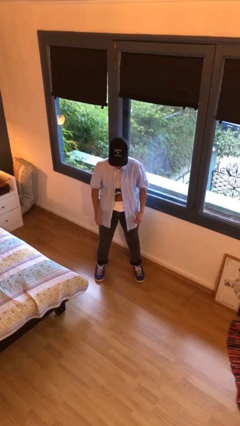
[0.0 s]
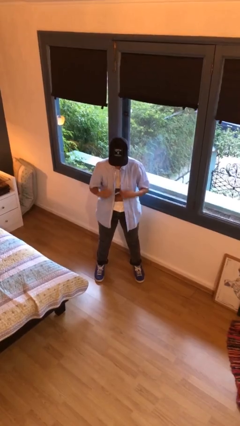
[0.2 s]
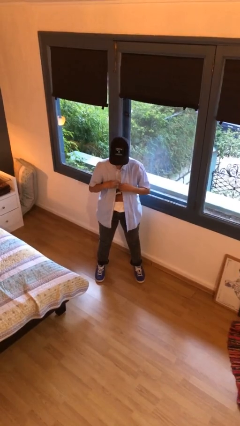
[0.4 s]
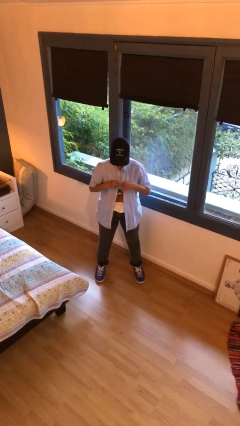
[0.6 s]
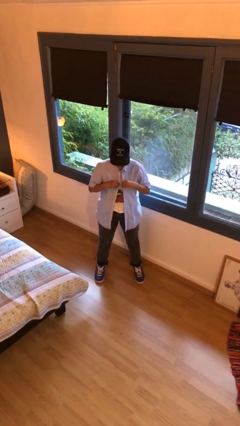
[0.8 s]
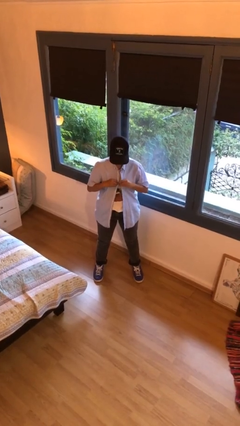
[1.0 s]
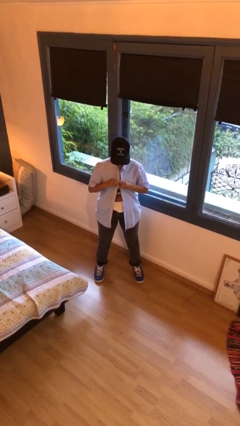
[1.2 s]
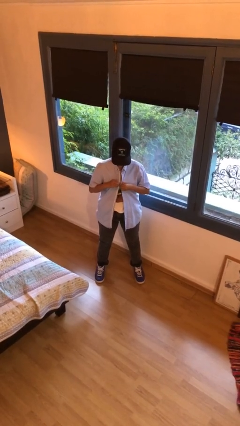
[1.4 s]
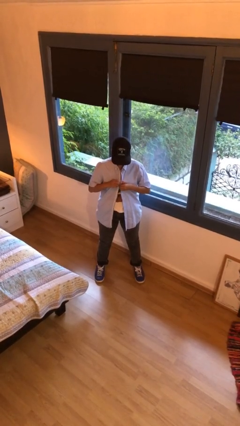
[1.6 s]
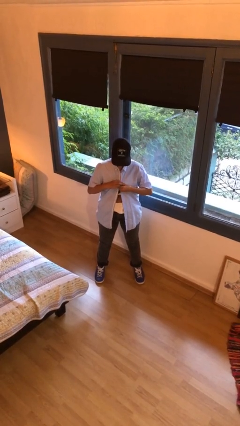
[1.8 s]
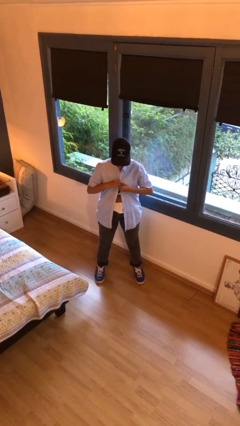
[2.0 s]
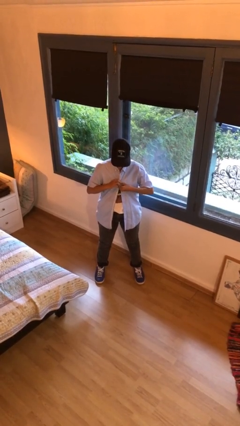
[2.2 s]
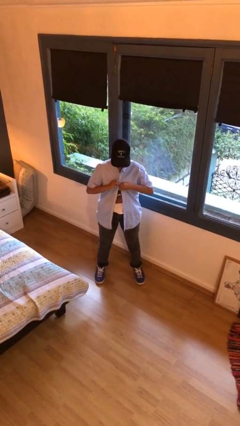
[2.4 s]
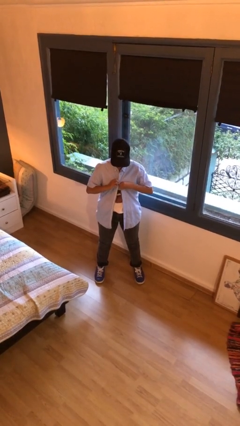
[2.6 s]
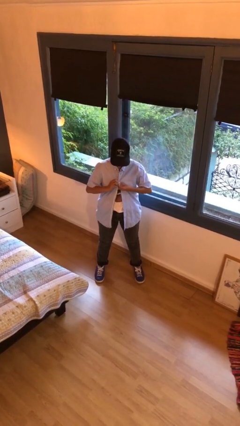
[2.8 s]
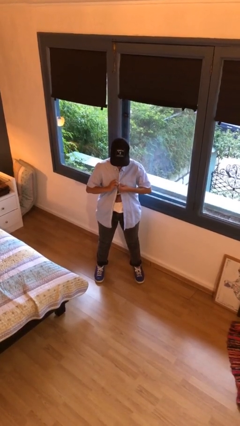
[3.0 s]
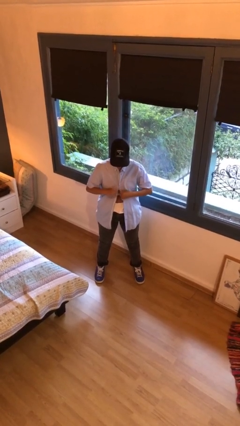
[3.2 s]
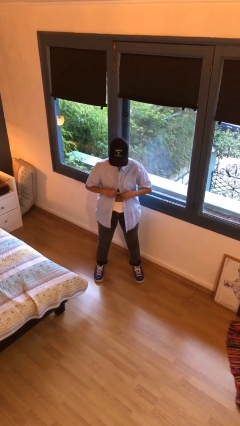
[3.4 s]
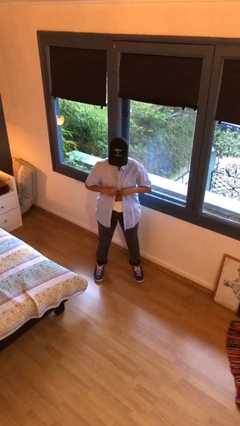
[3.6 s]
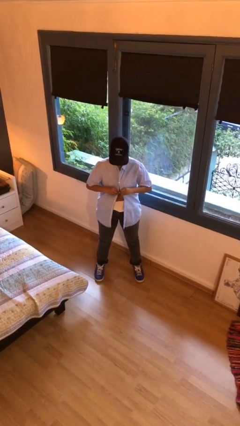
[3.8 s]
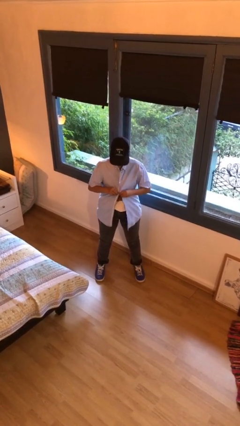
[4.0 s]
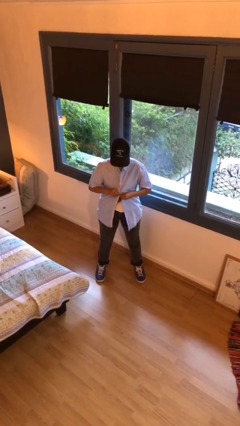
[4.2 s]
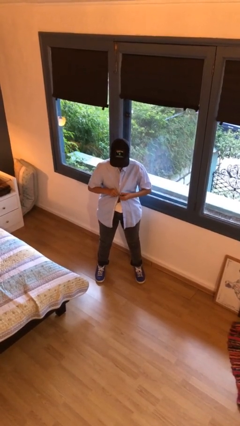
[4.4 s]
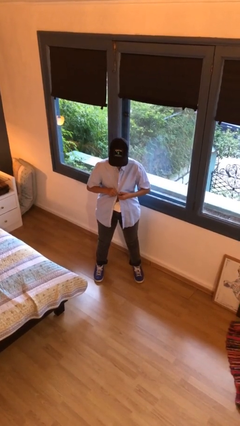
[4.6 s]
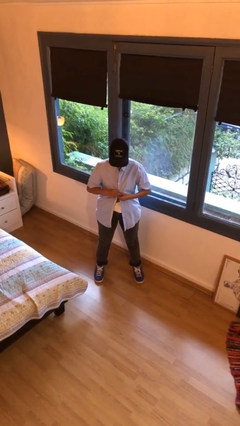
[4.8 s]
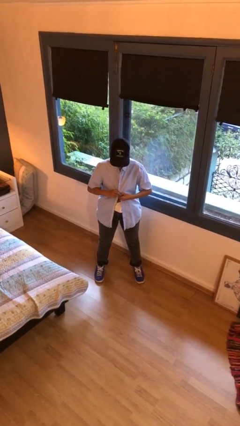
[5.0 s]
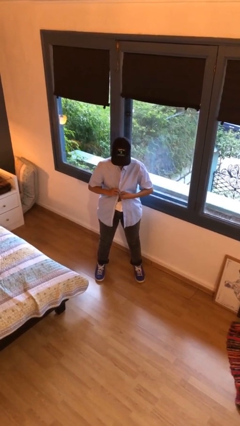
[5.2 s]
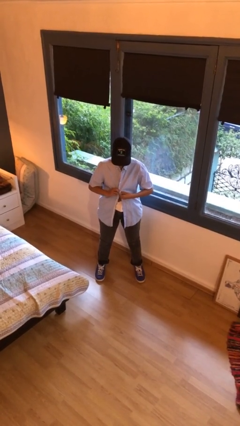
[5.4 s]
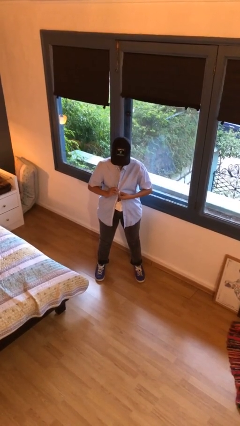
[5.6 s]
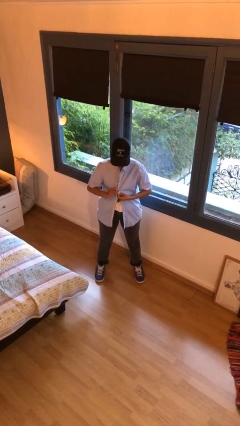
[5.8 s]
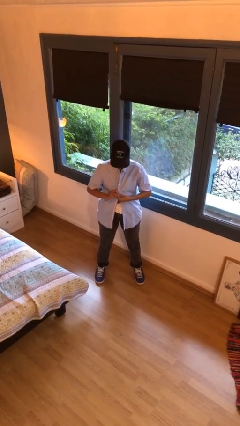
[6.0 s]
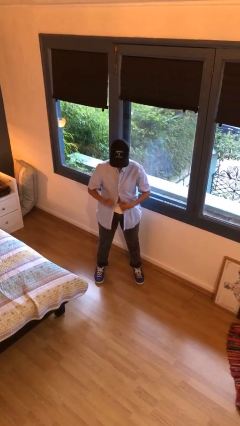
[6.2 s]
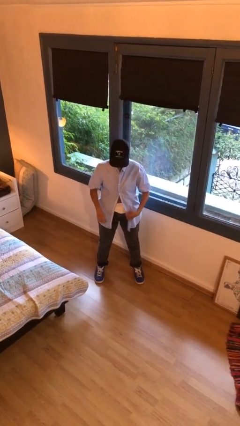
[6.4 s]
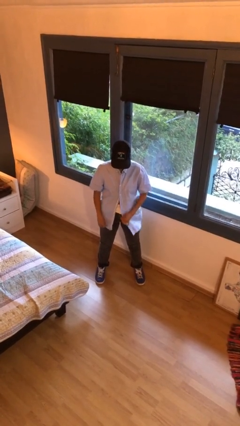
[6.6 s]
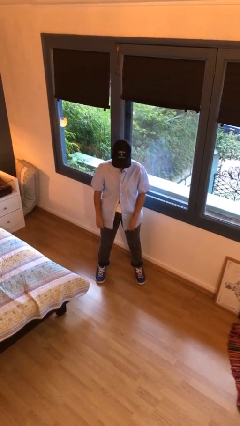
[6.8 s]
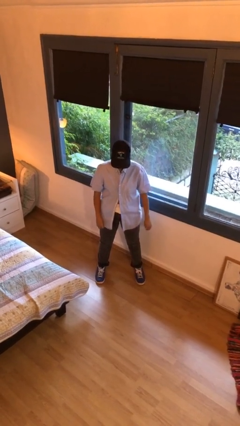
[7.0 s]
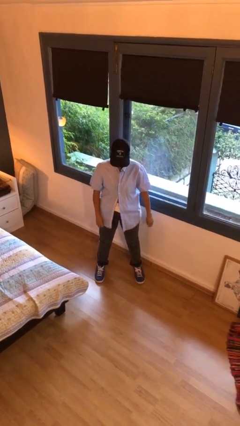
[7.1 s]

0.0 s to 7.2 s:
person buttons shirt

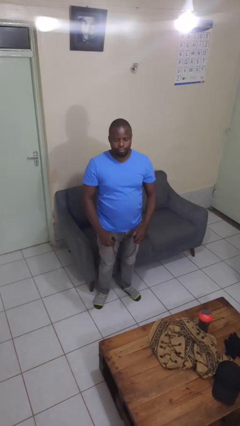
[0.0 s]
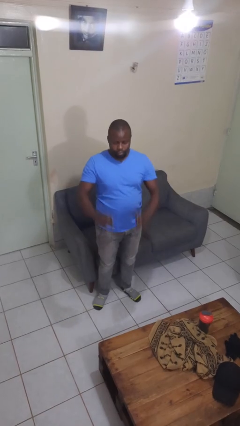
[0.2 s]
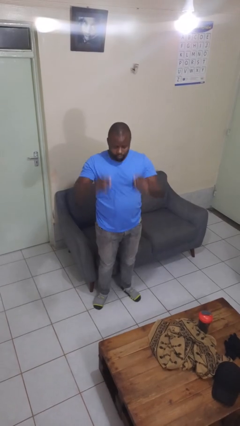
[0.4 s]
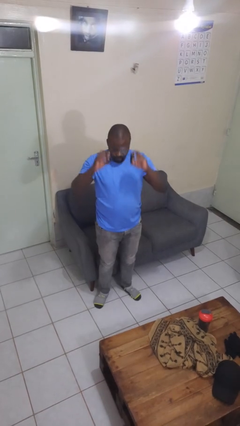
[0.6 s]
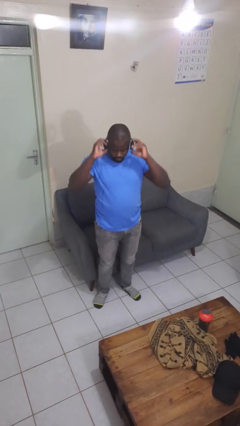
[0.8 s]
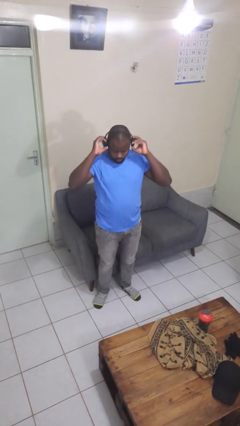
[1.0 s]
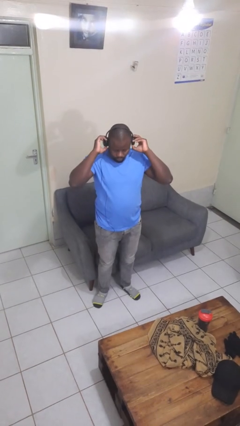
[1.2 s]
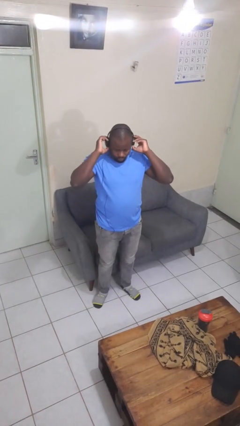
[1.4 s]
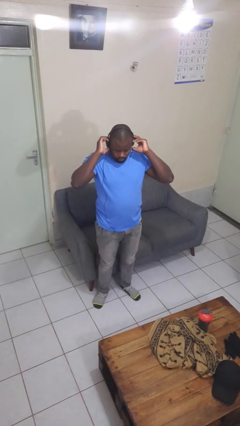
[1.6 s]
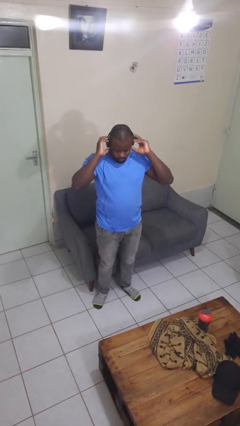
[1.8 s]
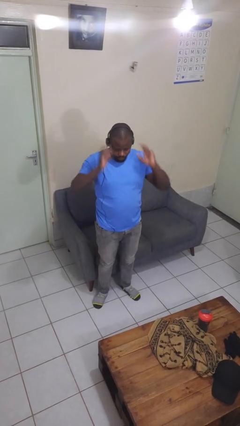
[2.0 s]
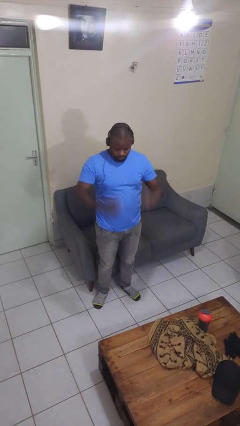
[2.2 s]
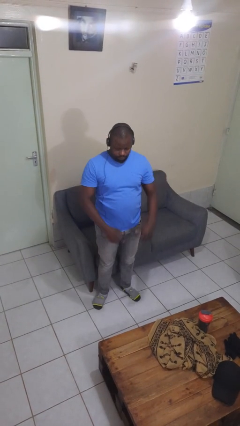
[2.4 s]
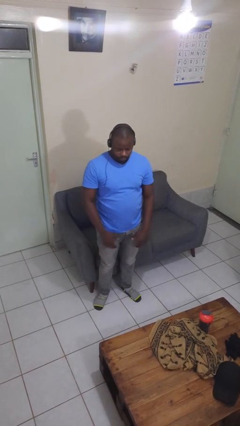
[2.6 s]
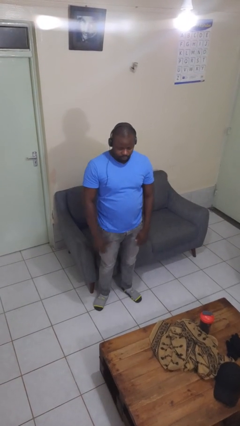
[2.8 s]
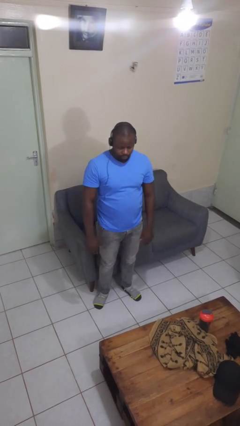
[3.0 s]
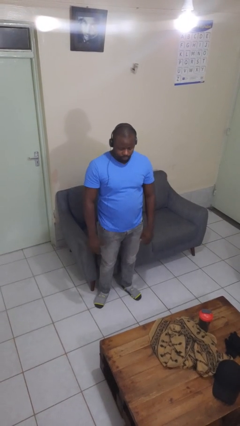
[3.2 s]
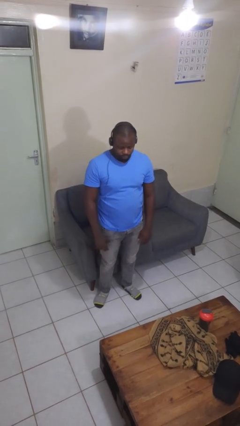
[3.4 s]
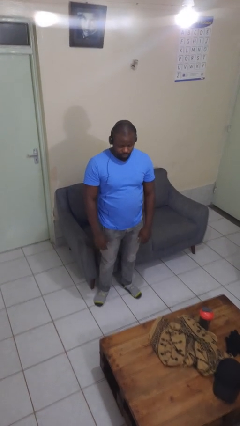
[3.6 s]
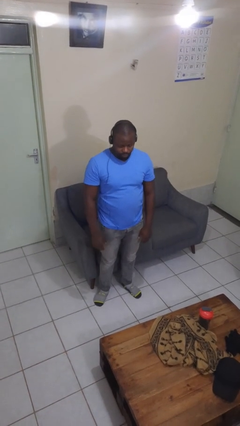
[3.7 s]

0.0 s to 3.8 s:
person puts on headphones

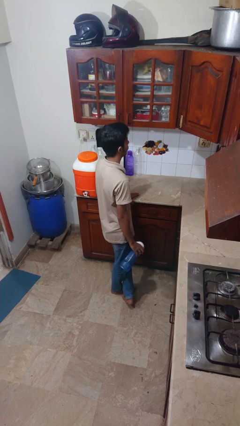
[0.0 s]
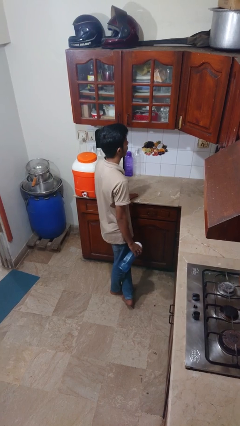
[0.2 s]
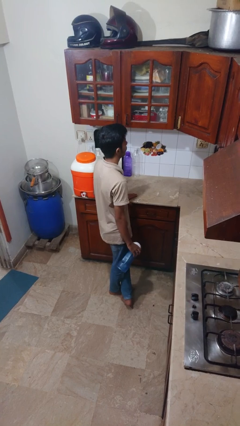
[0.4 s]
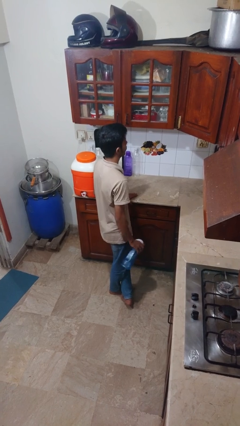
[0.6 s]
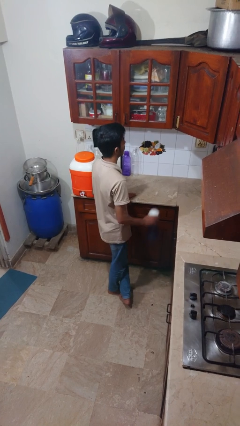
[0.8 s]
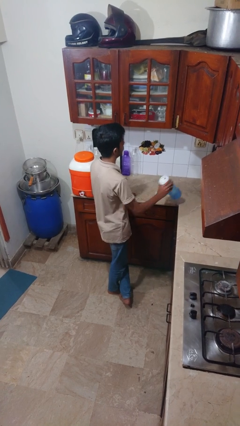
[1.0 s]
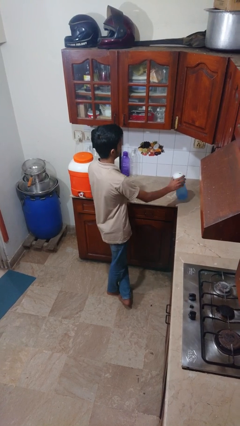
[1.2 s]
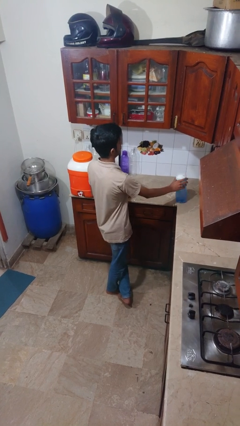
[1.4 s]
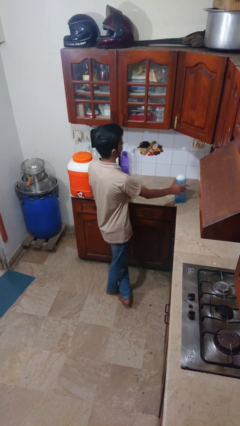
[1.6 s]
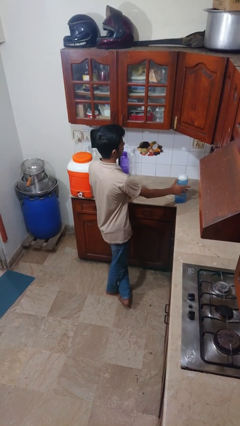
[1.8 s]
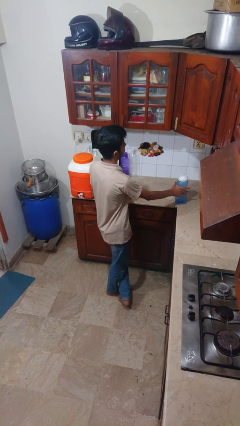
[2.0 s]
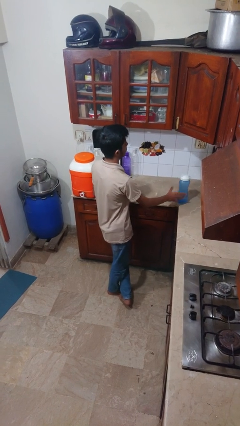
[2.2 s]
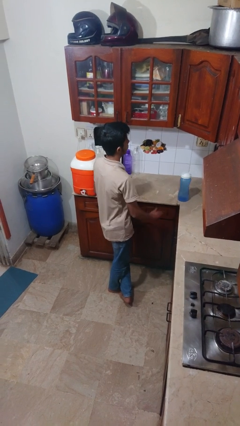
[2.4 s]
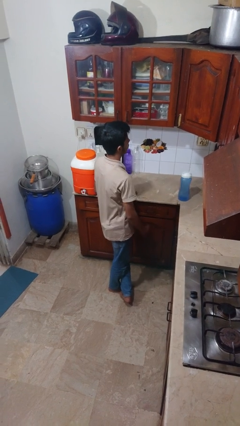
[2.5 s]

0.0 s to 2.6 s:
person puts down object on countertop

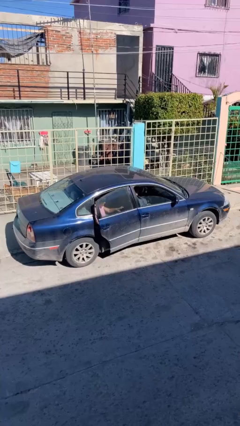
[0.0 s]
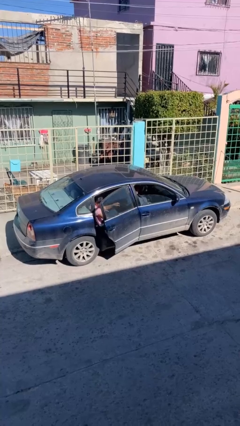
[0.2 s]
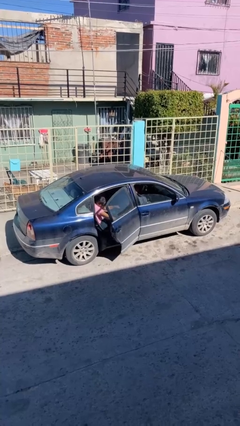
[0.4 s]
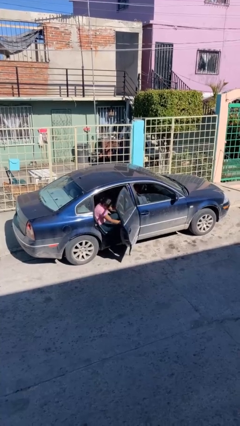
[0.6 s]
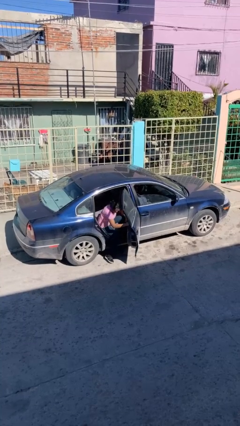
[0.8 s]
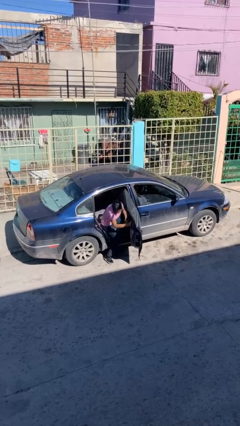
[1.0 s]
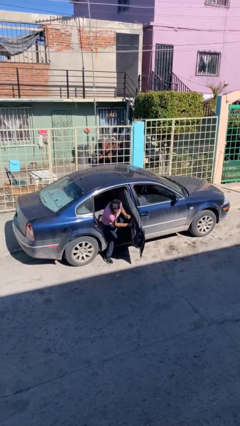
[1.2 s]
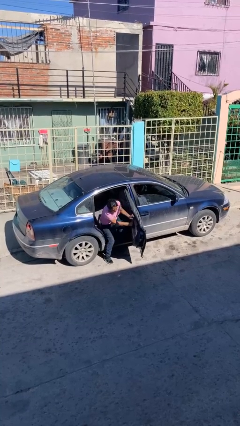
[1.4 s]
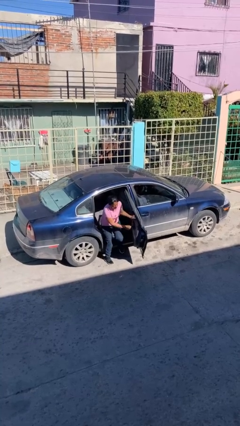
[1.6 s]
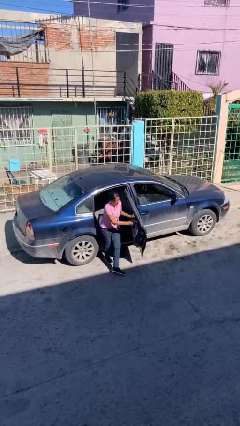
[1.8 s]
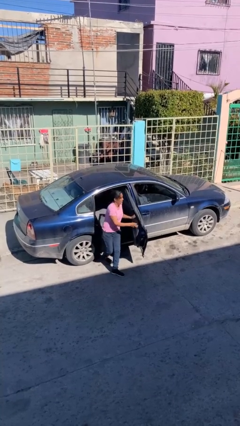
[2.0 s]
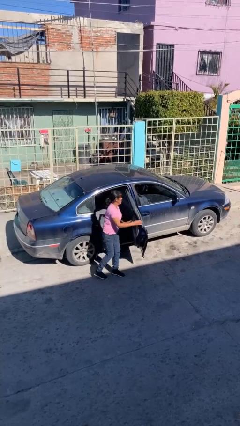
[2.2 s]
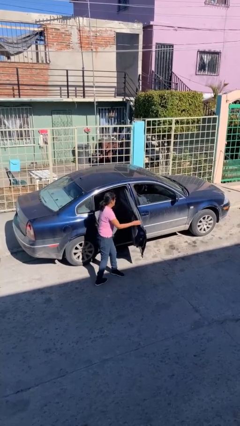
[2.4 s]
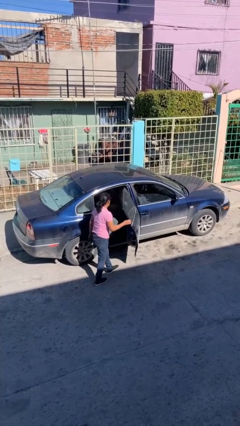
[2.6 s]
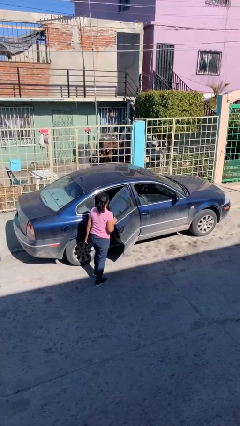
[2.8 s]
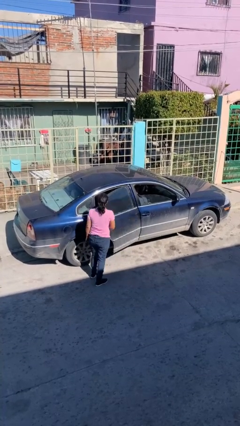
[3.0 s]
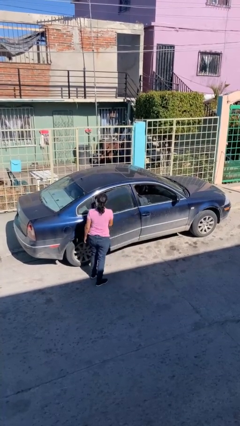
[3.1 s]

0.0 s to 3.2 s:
car drops off person

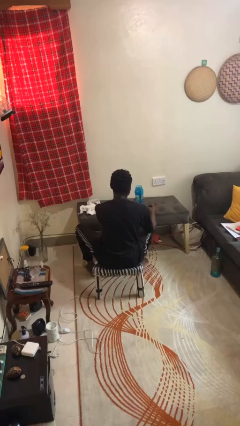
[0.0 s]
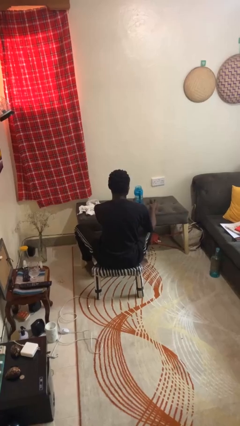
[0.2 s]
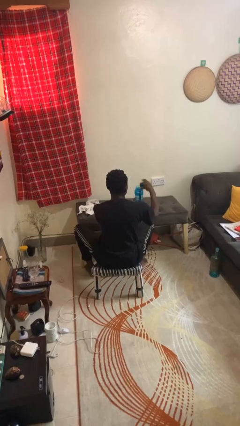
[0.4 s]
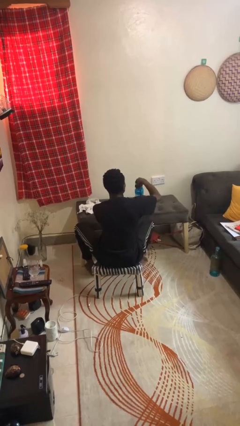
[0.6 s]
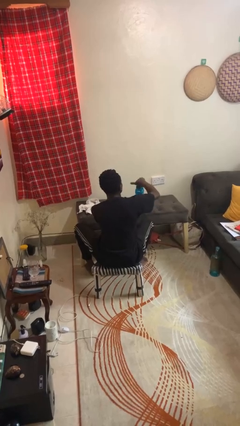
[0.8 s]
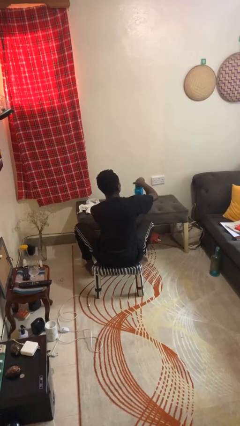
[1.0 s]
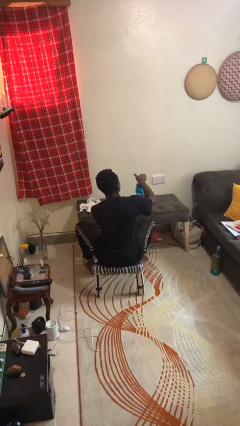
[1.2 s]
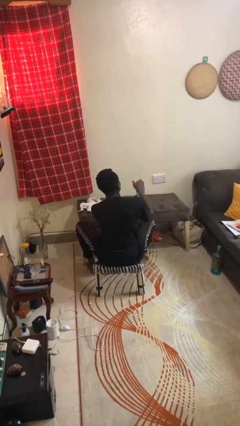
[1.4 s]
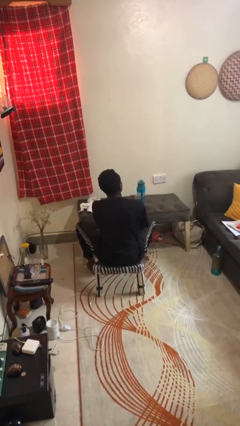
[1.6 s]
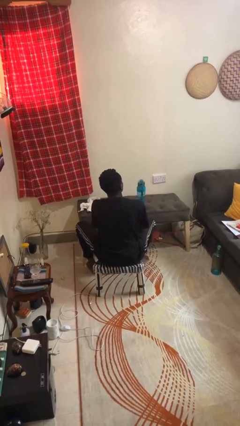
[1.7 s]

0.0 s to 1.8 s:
person closes jar
